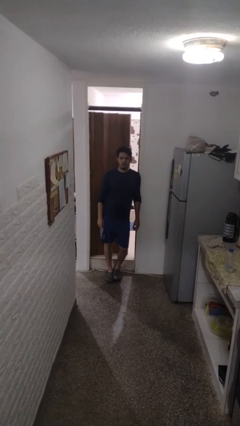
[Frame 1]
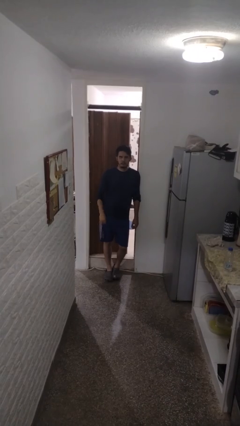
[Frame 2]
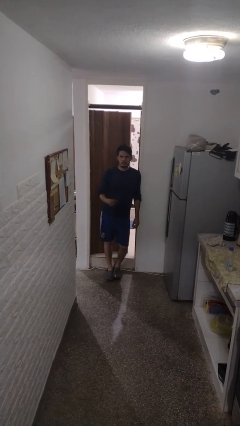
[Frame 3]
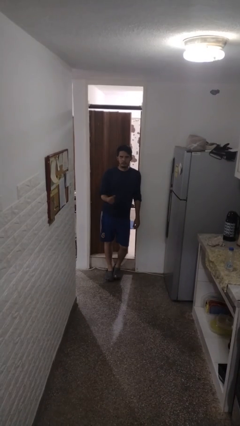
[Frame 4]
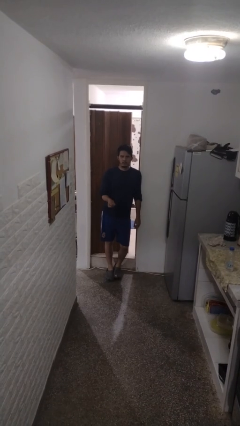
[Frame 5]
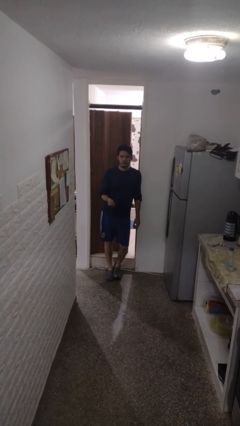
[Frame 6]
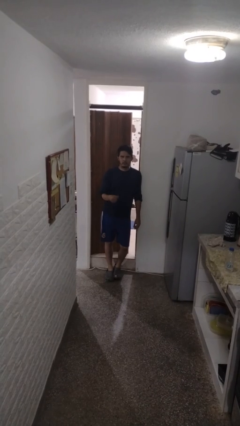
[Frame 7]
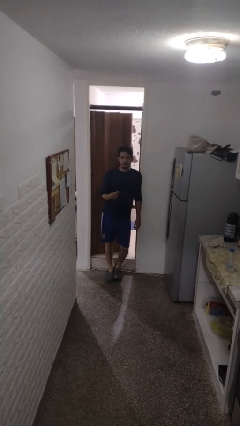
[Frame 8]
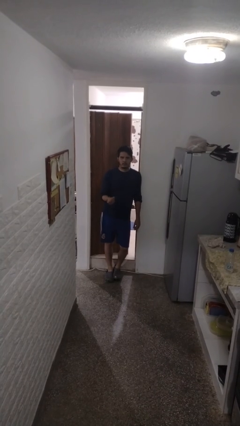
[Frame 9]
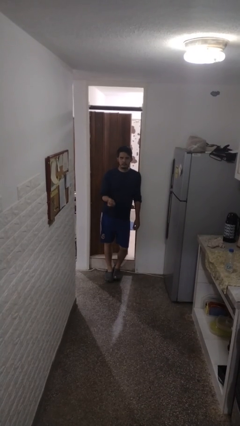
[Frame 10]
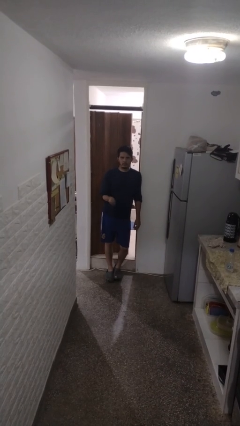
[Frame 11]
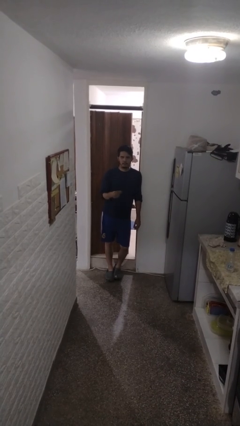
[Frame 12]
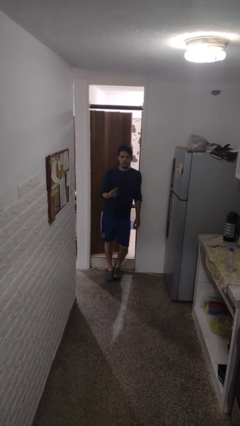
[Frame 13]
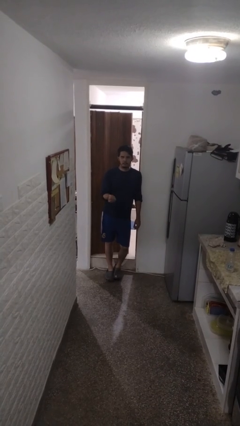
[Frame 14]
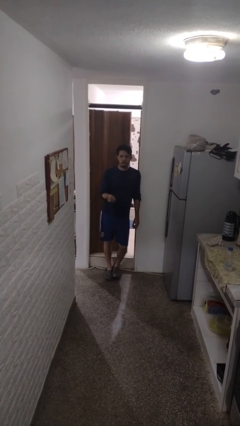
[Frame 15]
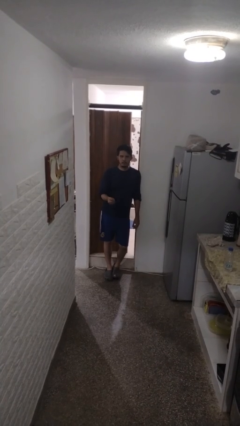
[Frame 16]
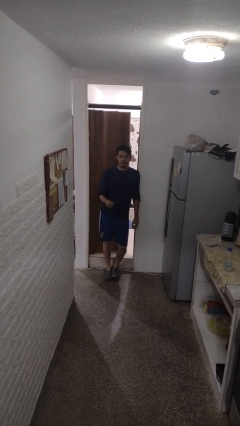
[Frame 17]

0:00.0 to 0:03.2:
person snaps fingers

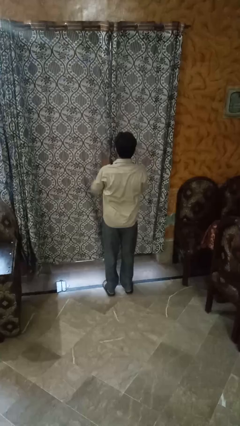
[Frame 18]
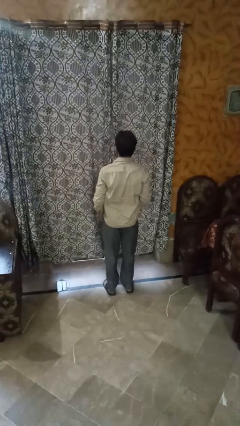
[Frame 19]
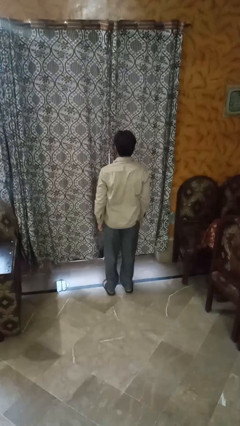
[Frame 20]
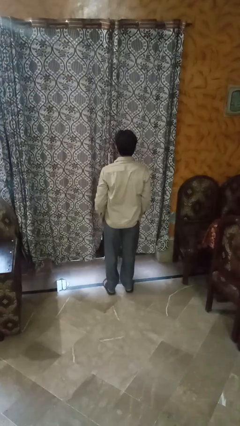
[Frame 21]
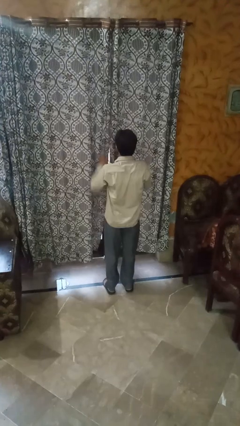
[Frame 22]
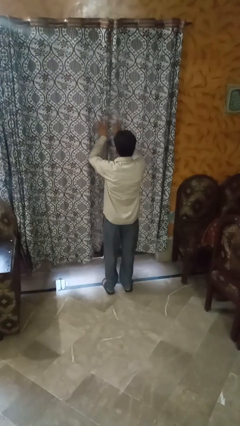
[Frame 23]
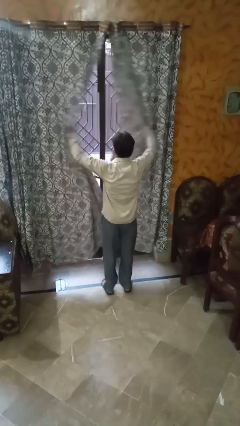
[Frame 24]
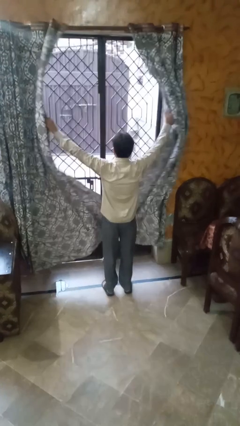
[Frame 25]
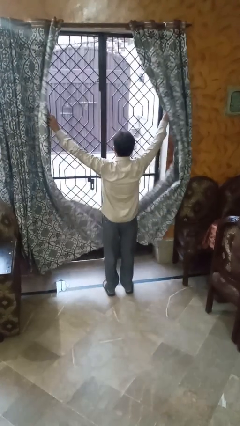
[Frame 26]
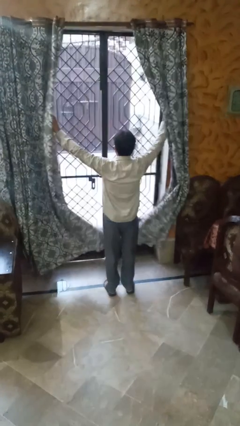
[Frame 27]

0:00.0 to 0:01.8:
person opens curtains

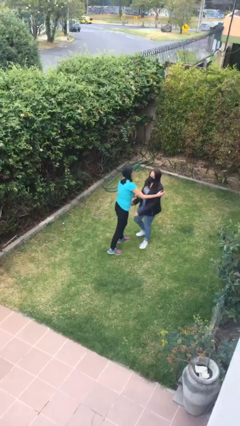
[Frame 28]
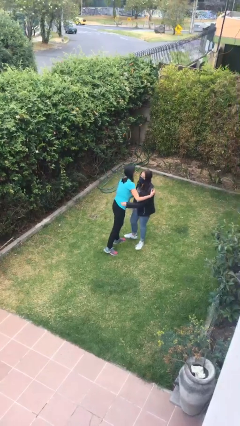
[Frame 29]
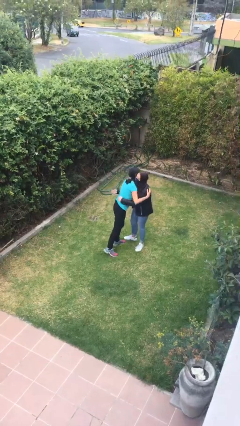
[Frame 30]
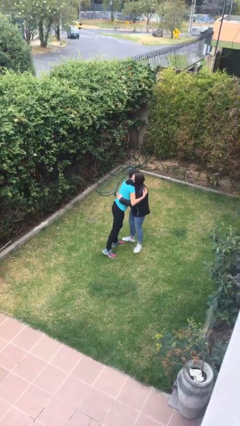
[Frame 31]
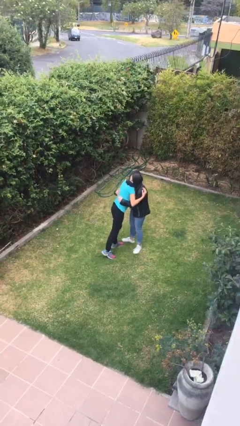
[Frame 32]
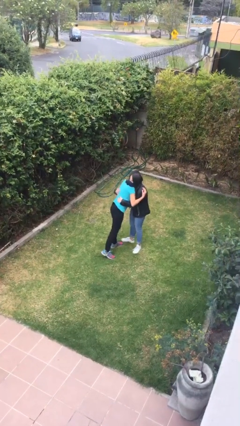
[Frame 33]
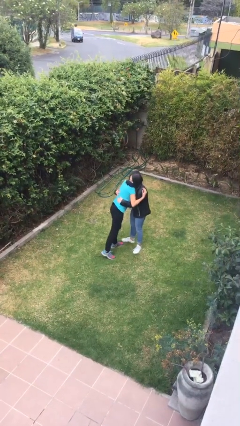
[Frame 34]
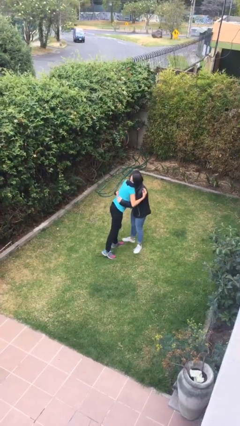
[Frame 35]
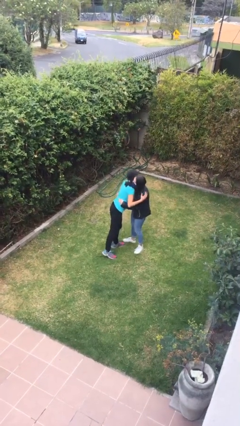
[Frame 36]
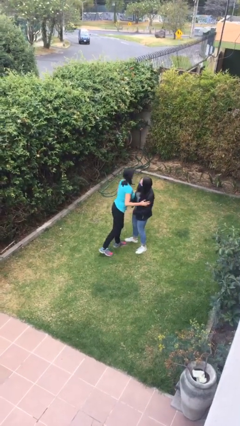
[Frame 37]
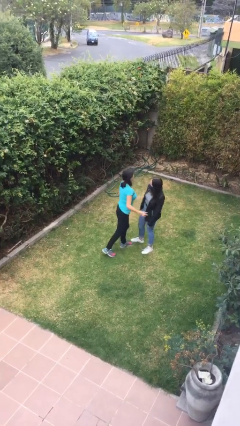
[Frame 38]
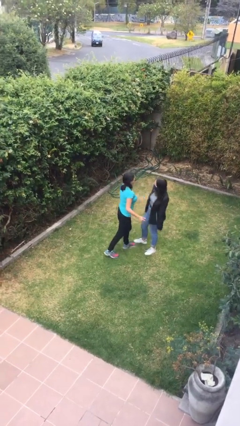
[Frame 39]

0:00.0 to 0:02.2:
person embraces person

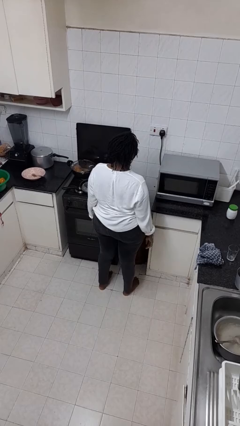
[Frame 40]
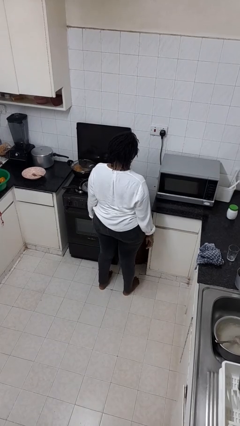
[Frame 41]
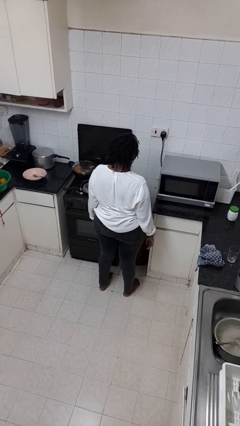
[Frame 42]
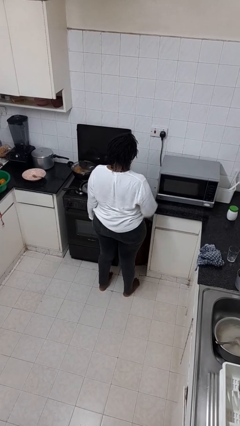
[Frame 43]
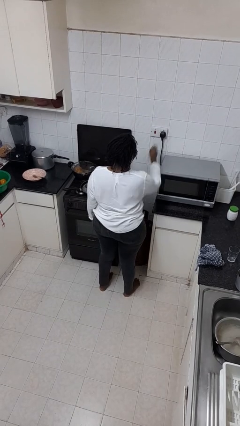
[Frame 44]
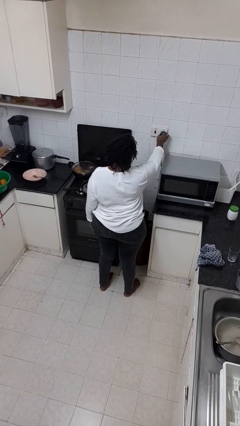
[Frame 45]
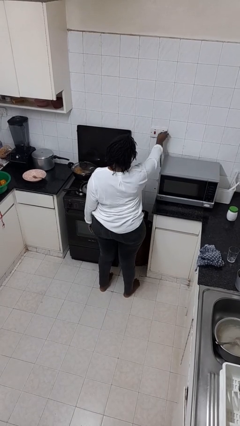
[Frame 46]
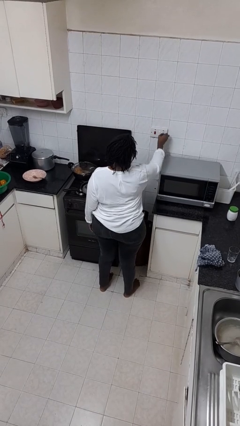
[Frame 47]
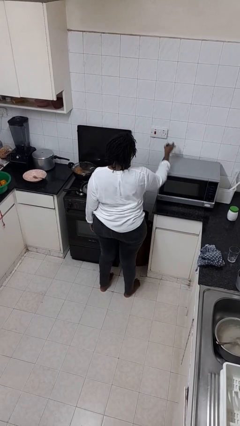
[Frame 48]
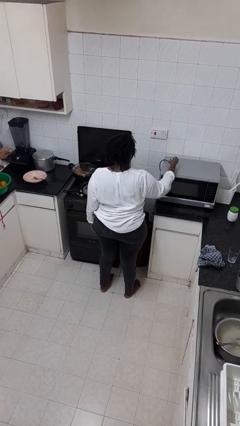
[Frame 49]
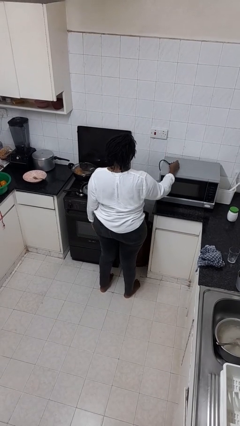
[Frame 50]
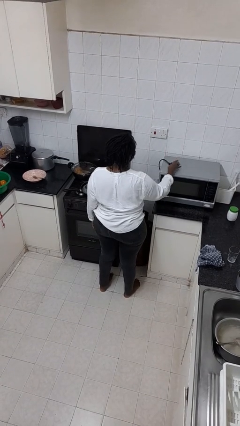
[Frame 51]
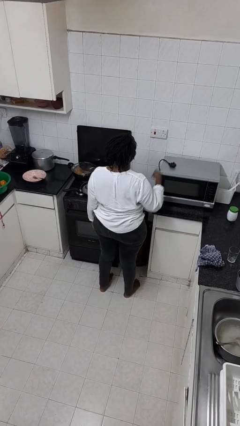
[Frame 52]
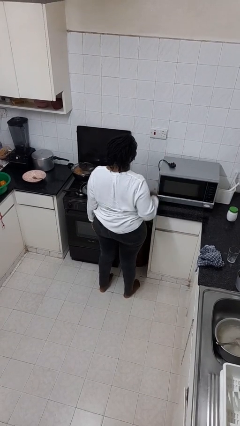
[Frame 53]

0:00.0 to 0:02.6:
person unplugs from electrical socket

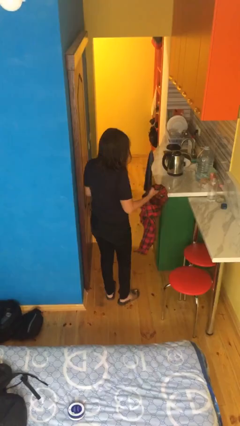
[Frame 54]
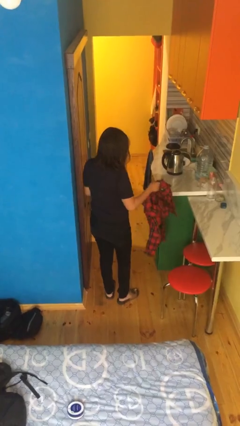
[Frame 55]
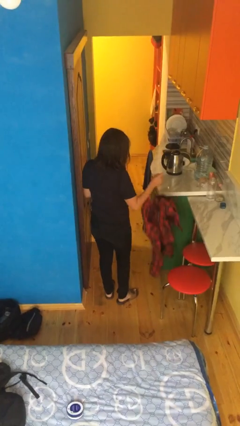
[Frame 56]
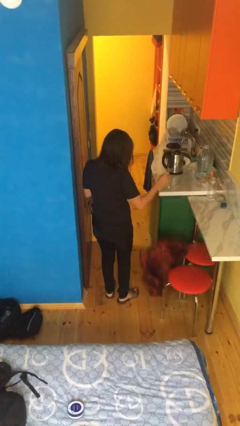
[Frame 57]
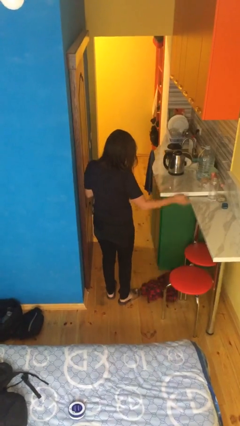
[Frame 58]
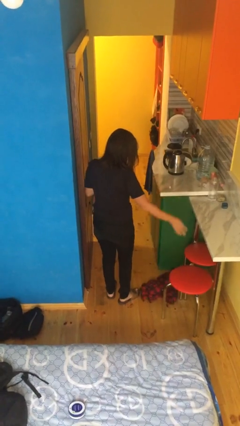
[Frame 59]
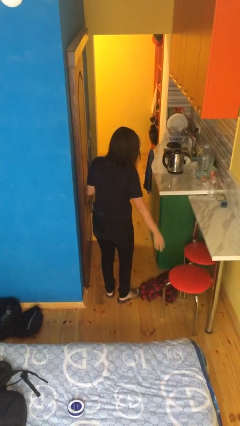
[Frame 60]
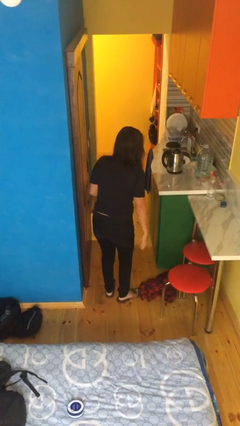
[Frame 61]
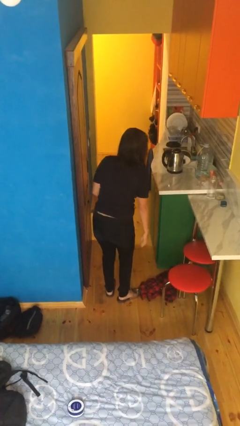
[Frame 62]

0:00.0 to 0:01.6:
person drops object

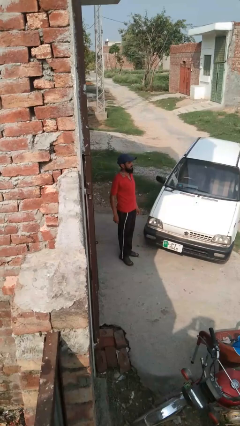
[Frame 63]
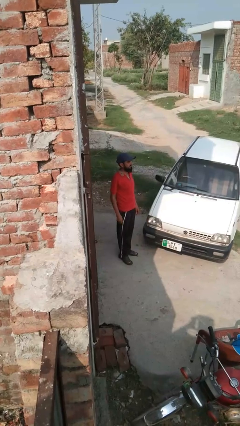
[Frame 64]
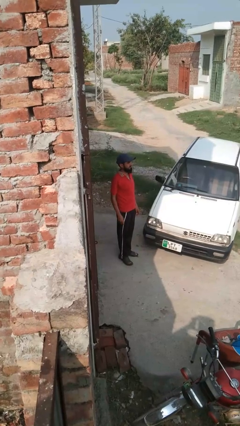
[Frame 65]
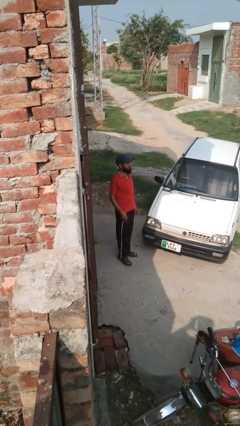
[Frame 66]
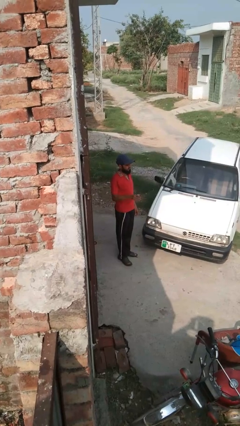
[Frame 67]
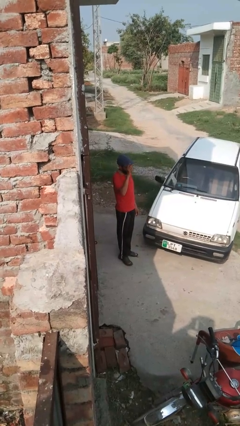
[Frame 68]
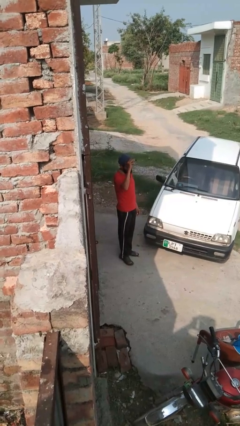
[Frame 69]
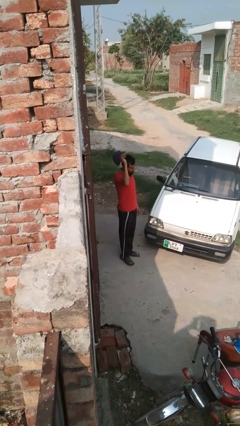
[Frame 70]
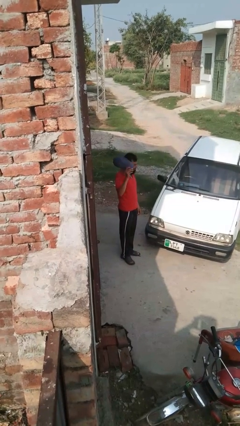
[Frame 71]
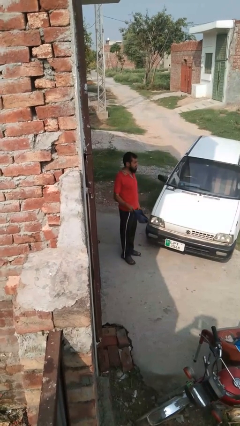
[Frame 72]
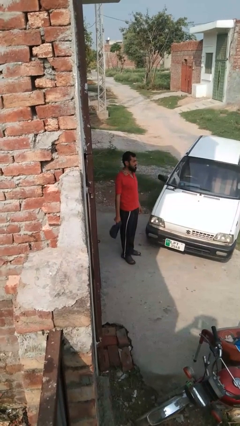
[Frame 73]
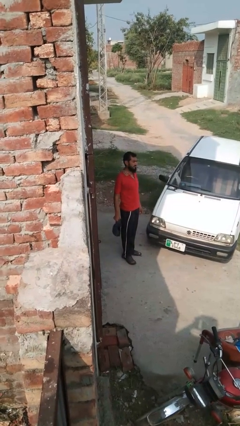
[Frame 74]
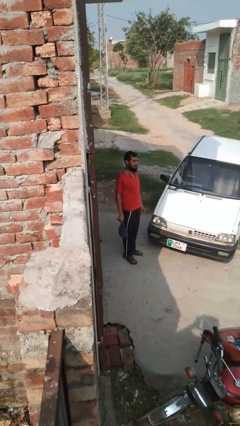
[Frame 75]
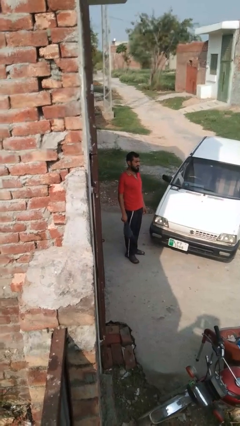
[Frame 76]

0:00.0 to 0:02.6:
person takes off hat

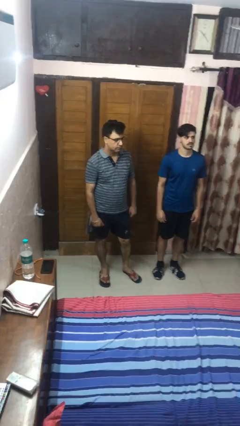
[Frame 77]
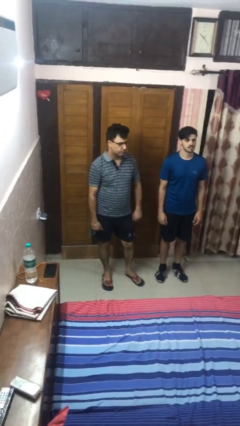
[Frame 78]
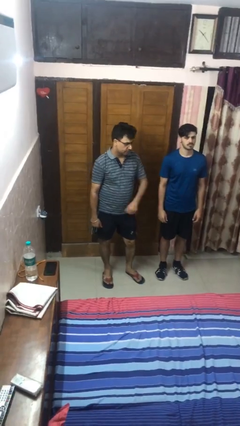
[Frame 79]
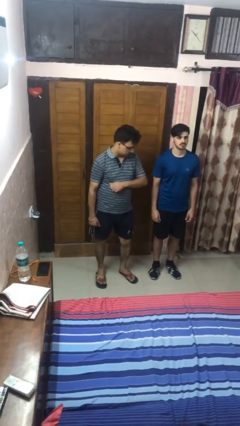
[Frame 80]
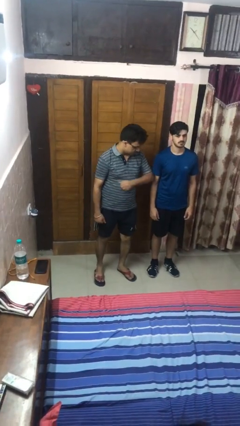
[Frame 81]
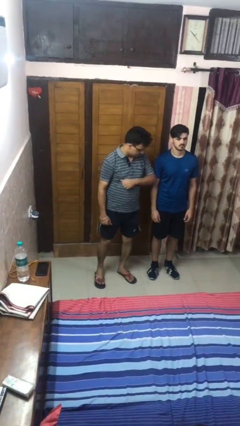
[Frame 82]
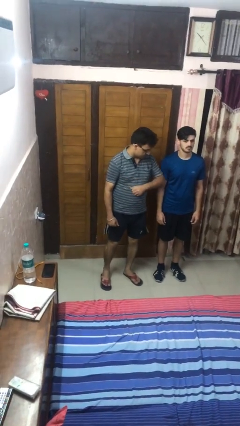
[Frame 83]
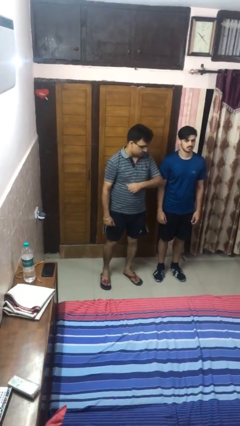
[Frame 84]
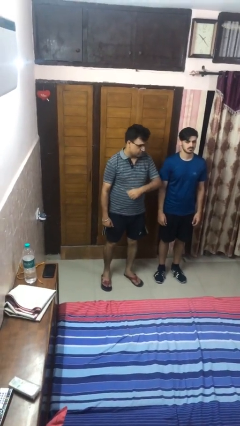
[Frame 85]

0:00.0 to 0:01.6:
person nudges person with elbow

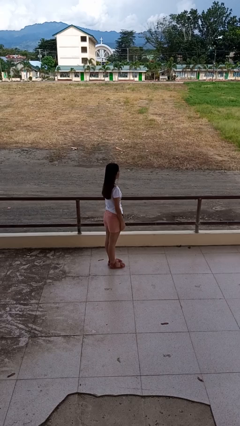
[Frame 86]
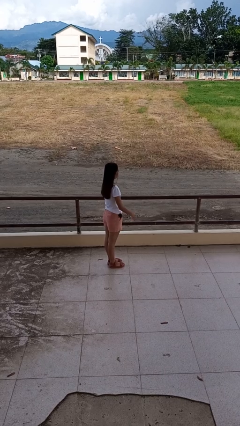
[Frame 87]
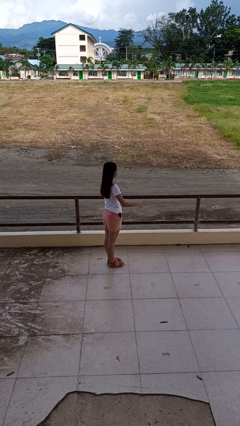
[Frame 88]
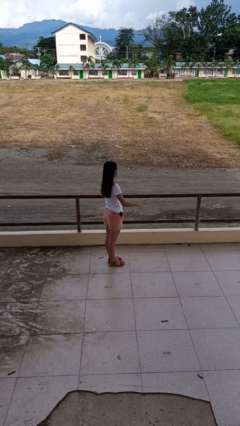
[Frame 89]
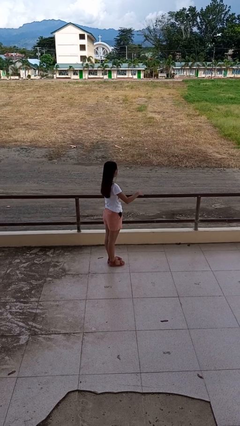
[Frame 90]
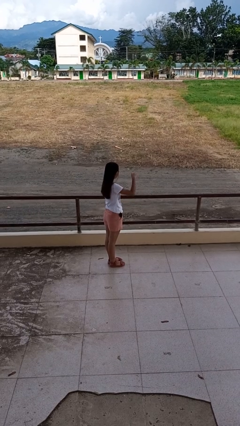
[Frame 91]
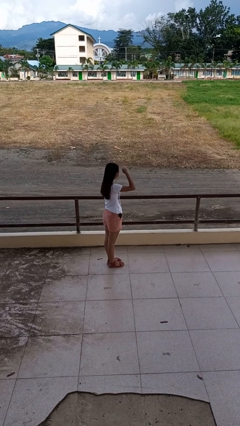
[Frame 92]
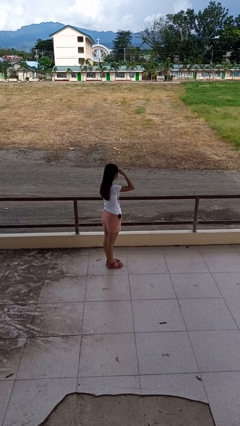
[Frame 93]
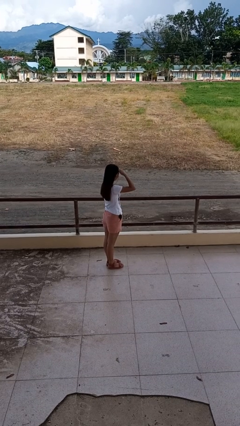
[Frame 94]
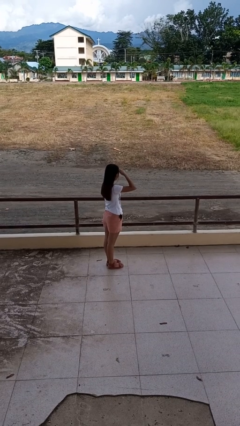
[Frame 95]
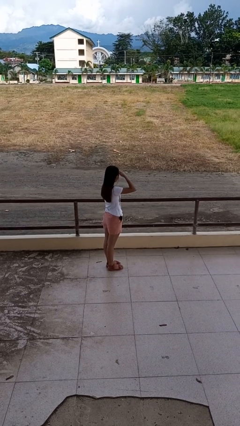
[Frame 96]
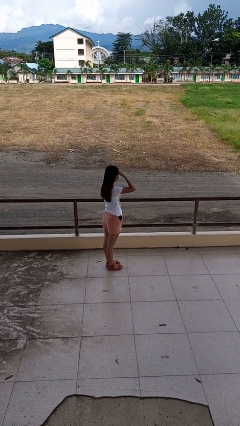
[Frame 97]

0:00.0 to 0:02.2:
person shades eyes
